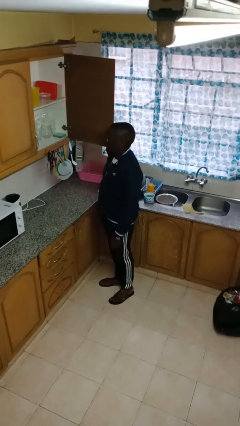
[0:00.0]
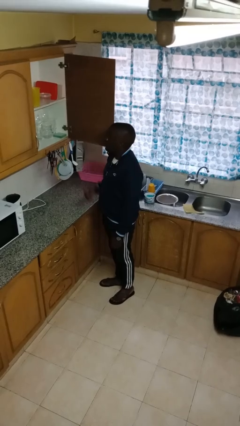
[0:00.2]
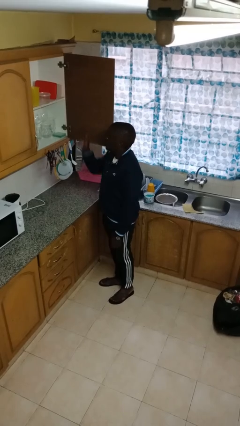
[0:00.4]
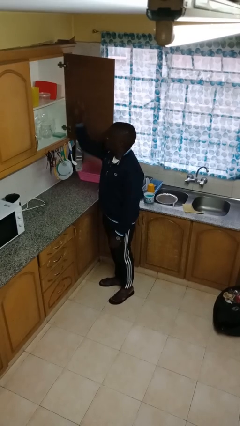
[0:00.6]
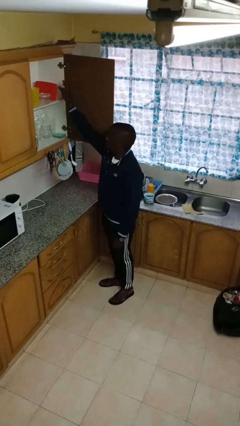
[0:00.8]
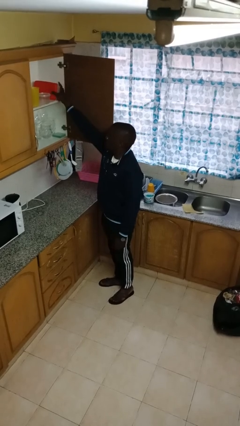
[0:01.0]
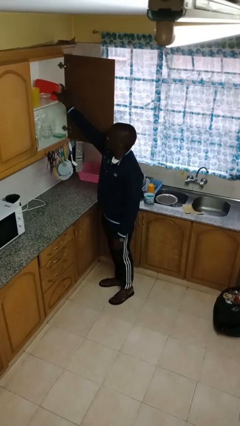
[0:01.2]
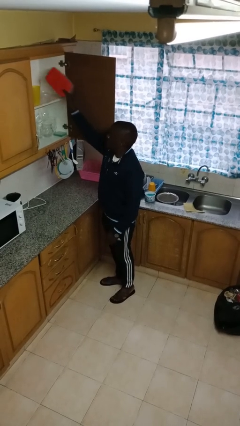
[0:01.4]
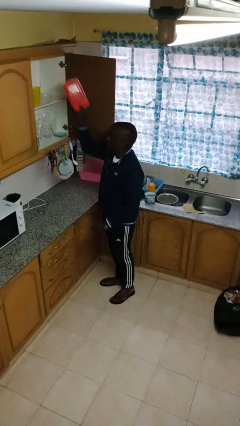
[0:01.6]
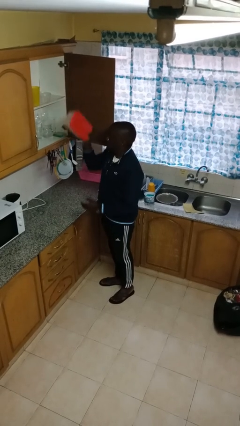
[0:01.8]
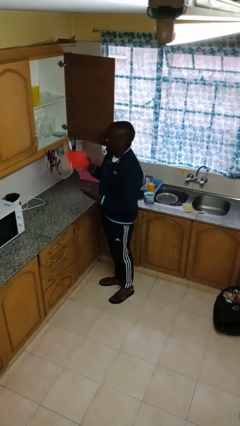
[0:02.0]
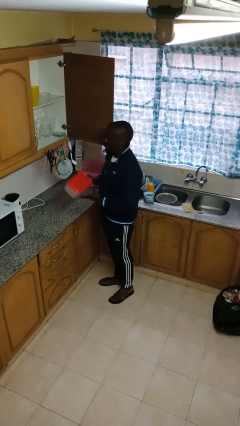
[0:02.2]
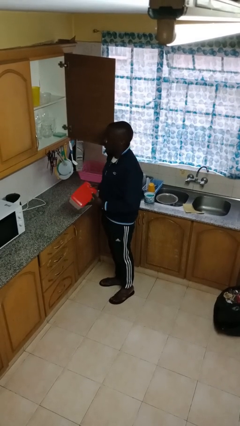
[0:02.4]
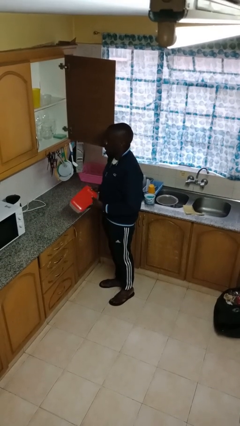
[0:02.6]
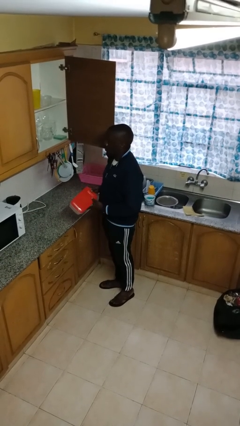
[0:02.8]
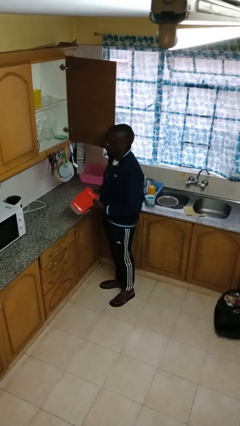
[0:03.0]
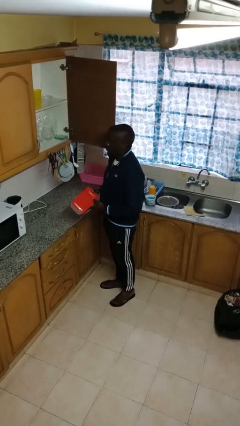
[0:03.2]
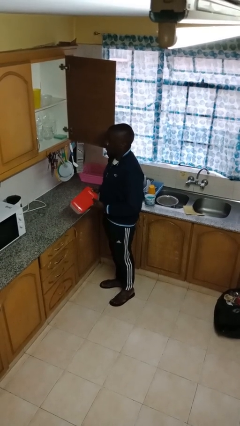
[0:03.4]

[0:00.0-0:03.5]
person picks up object from shelf

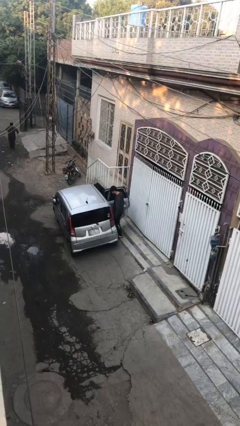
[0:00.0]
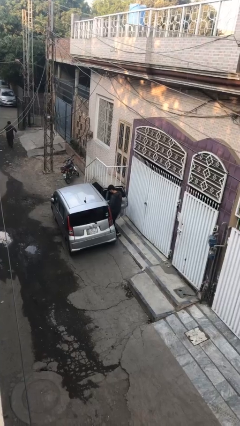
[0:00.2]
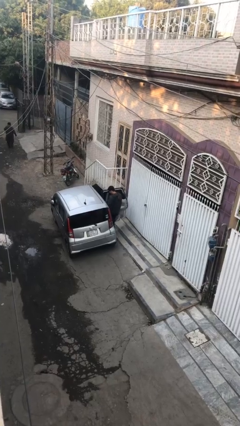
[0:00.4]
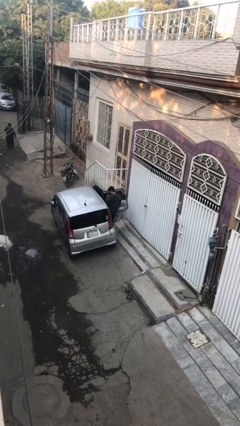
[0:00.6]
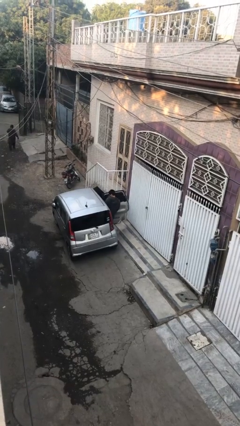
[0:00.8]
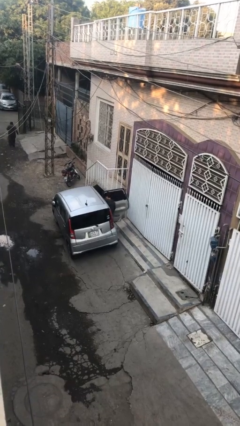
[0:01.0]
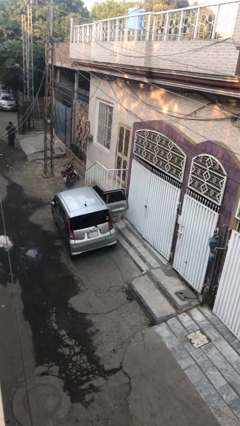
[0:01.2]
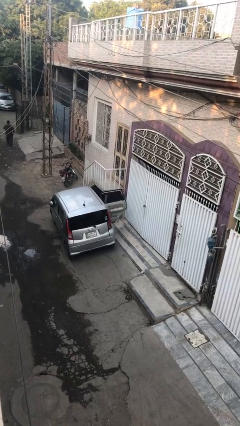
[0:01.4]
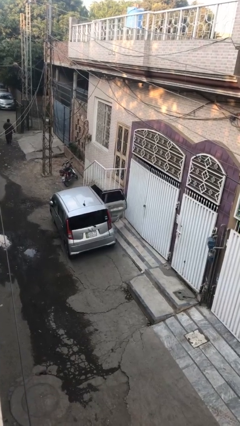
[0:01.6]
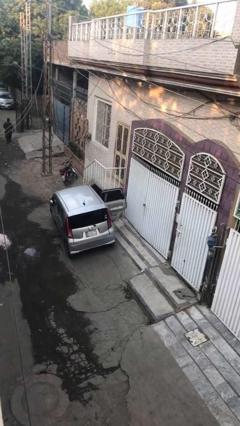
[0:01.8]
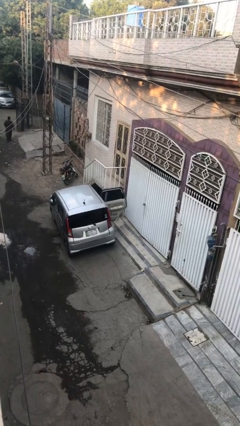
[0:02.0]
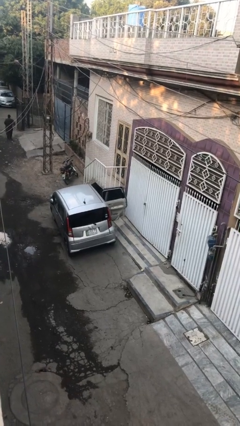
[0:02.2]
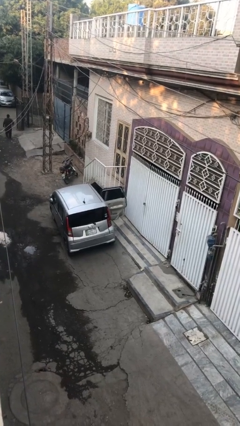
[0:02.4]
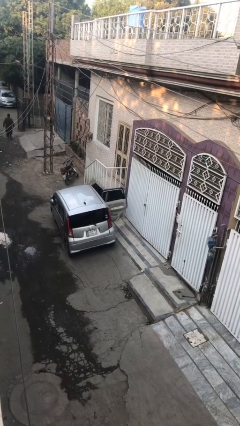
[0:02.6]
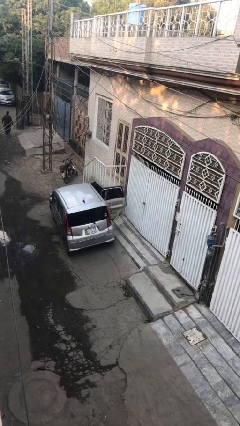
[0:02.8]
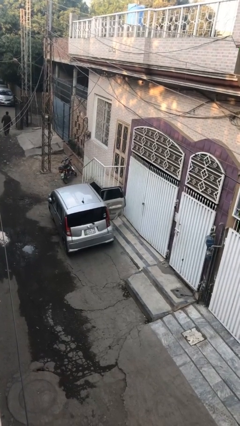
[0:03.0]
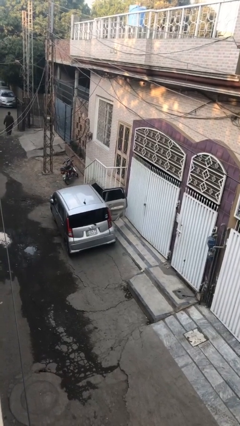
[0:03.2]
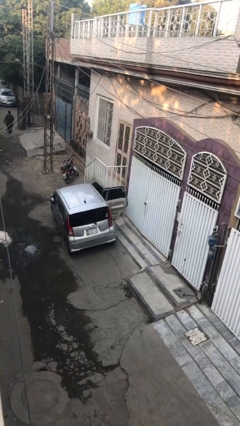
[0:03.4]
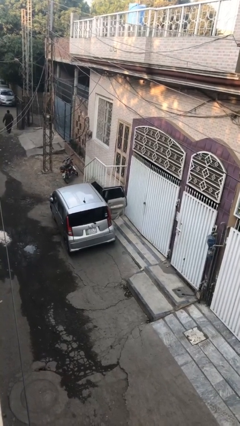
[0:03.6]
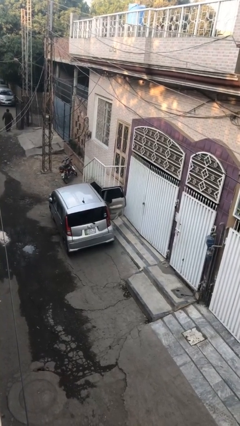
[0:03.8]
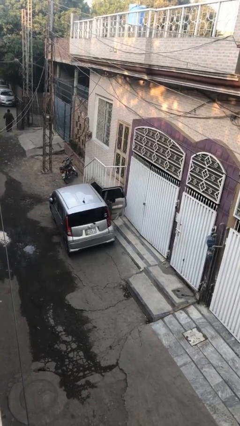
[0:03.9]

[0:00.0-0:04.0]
person enters car

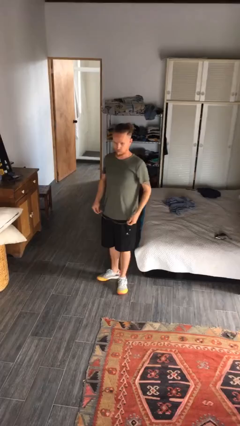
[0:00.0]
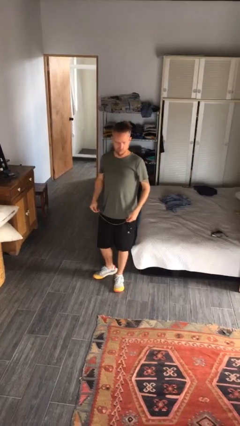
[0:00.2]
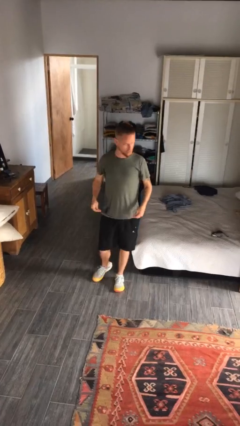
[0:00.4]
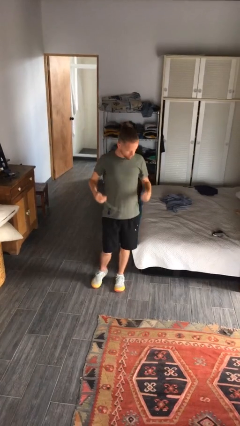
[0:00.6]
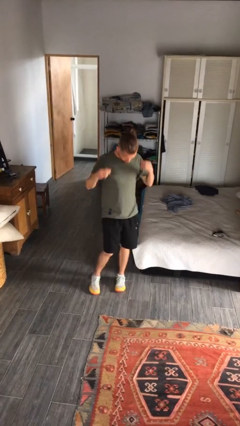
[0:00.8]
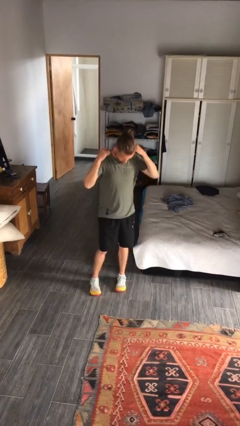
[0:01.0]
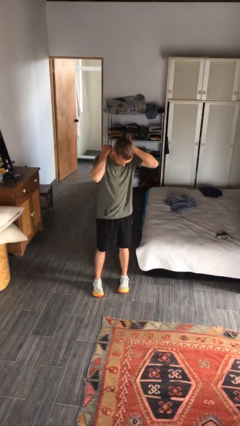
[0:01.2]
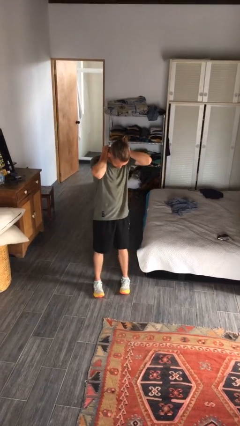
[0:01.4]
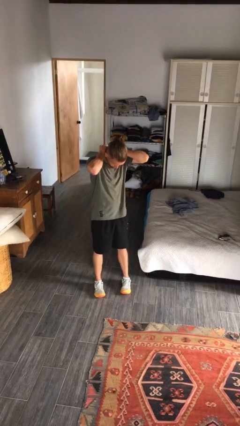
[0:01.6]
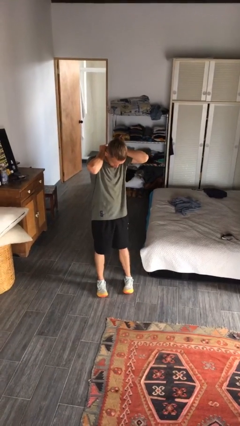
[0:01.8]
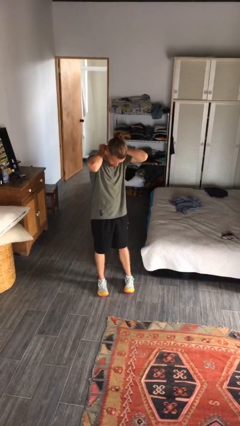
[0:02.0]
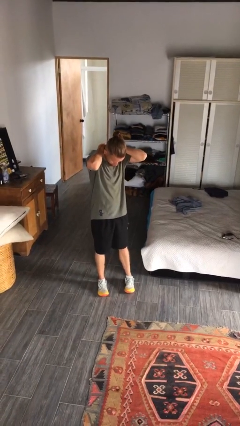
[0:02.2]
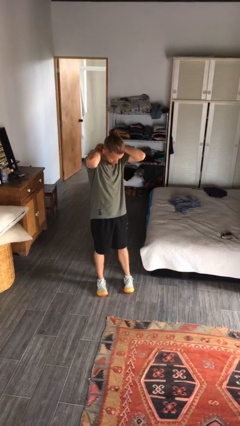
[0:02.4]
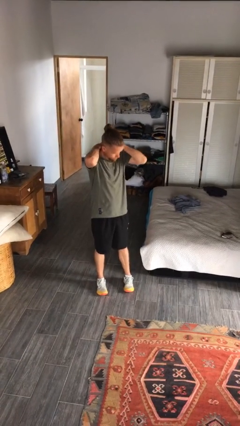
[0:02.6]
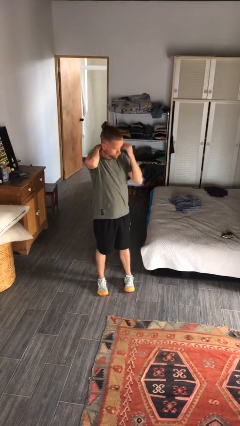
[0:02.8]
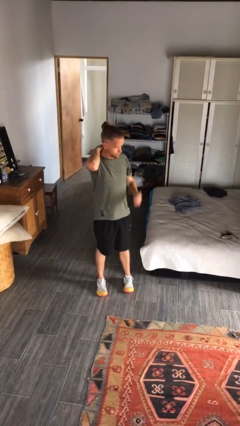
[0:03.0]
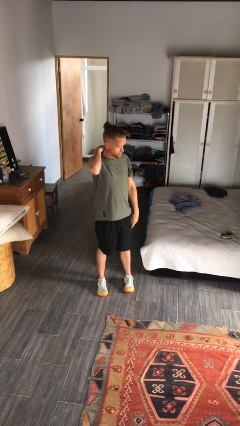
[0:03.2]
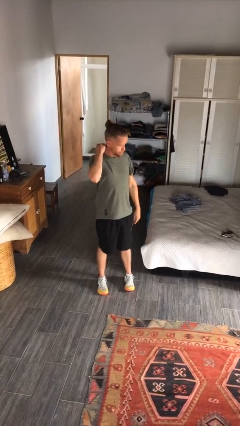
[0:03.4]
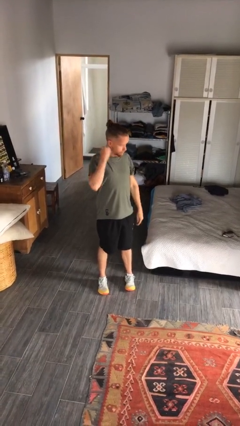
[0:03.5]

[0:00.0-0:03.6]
person puts on necklace

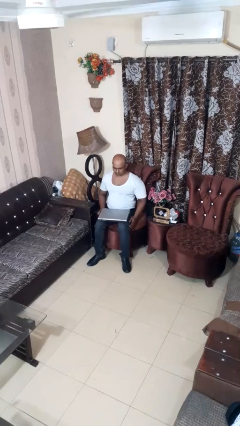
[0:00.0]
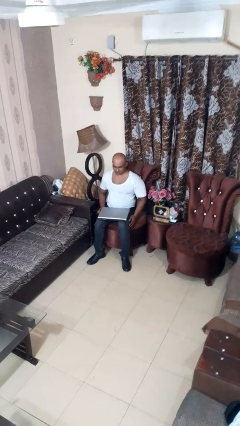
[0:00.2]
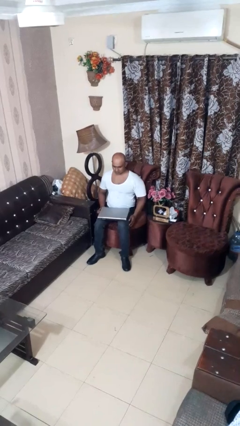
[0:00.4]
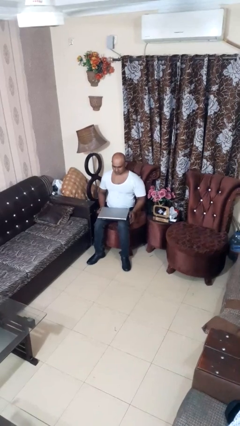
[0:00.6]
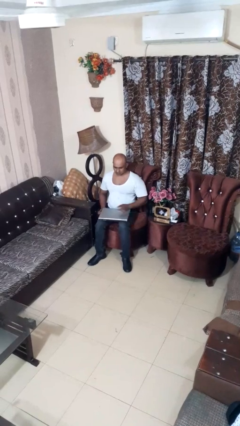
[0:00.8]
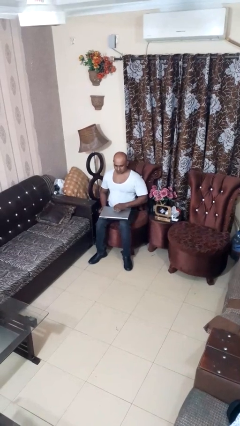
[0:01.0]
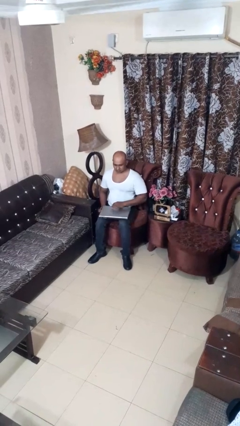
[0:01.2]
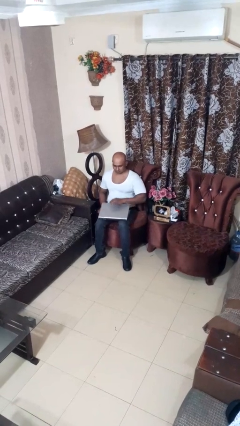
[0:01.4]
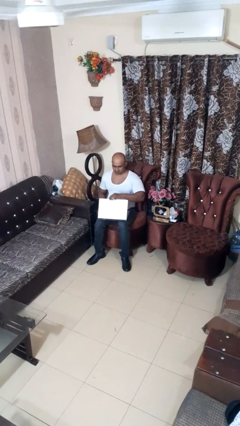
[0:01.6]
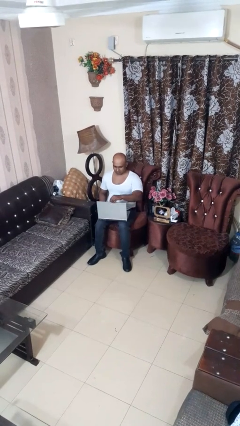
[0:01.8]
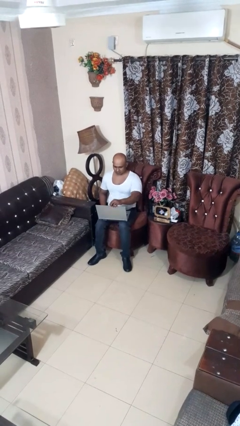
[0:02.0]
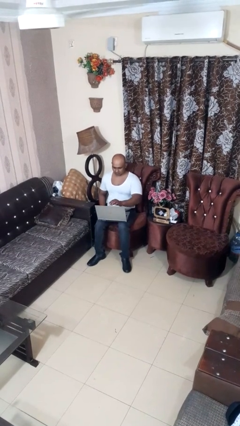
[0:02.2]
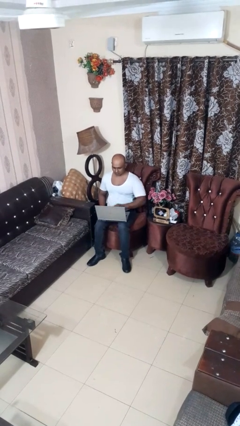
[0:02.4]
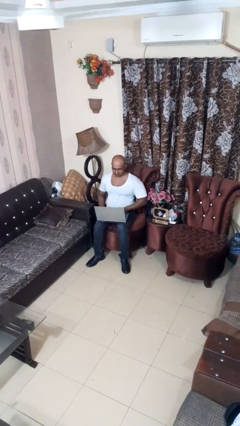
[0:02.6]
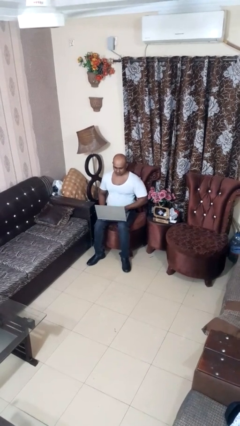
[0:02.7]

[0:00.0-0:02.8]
person opens laptop

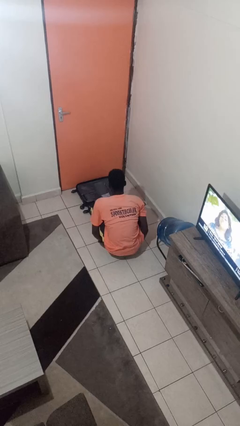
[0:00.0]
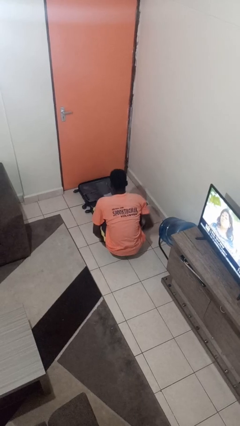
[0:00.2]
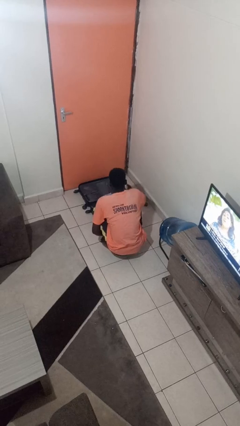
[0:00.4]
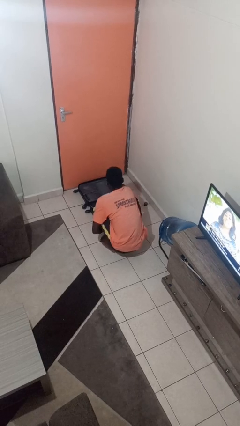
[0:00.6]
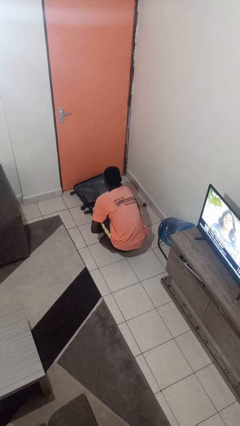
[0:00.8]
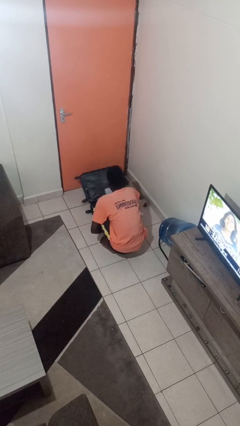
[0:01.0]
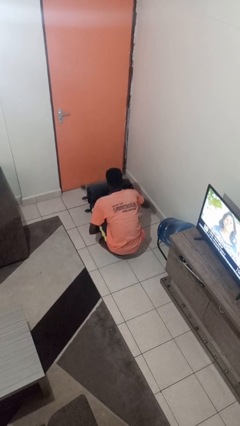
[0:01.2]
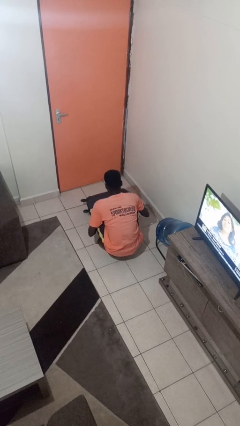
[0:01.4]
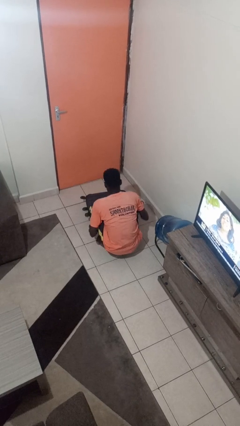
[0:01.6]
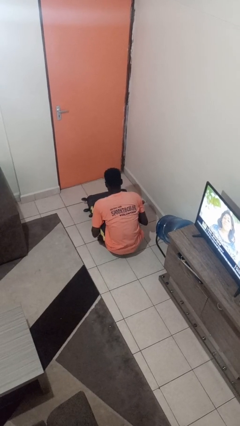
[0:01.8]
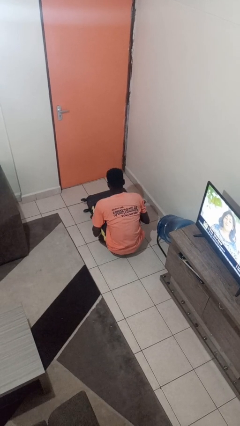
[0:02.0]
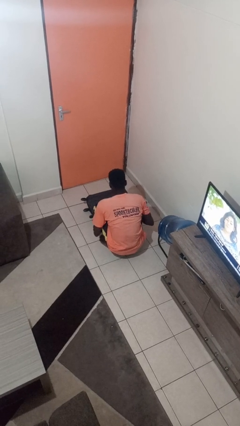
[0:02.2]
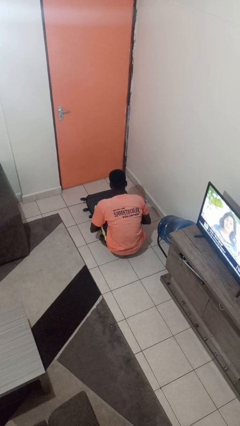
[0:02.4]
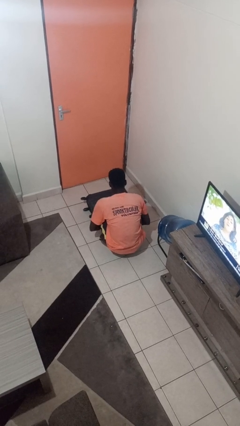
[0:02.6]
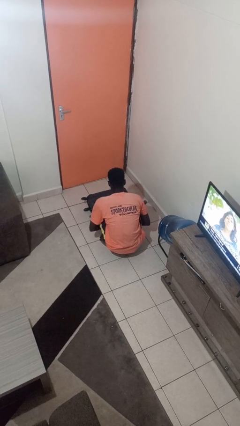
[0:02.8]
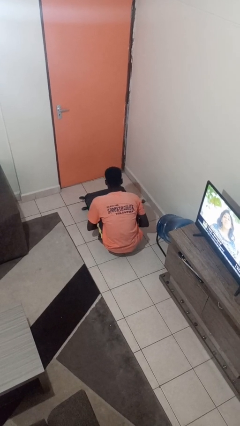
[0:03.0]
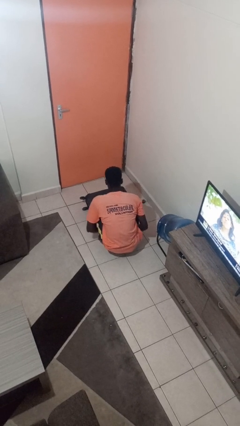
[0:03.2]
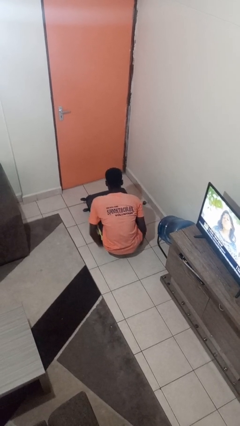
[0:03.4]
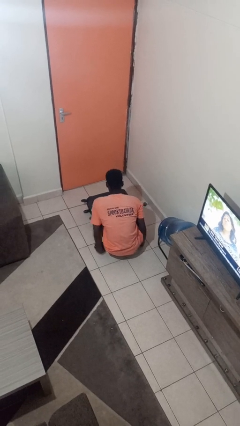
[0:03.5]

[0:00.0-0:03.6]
person closes suitcase
